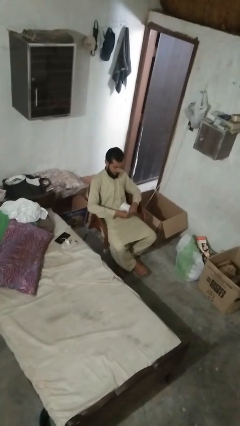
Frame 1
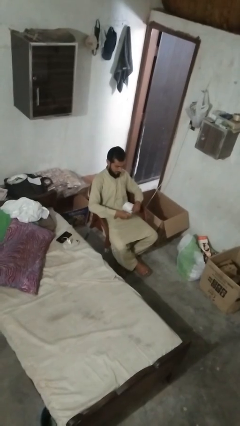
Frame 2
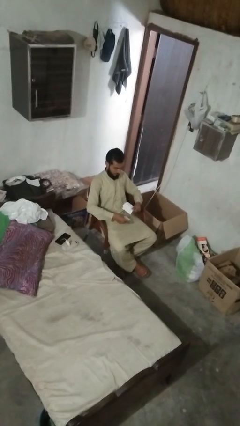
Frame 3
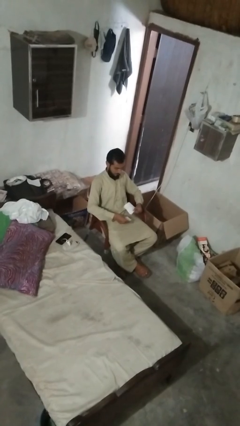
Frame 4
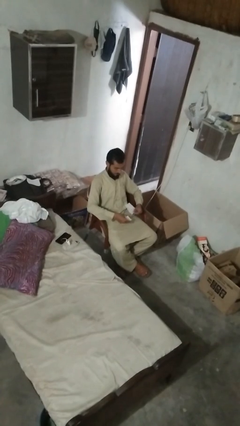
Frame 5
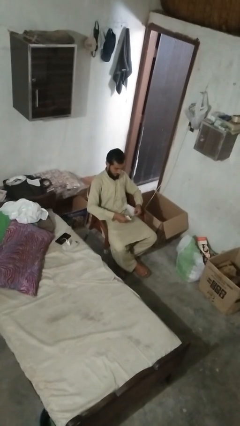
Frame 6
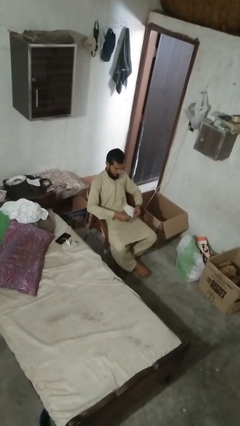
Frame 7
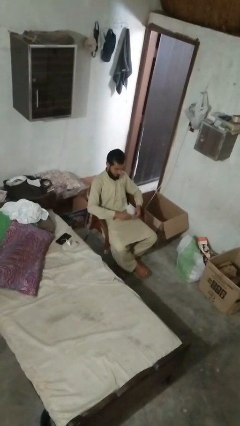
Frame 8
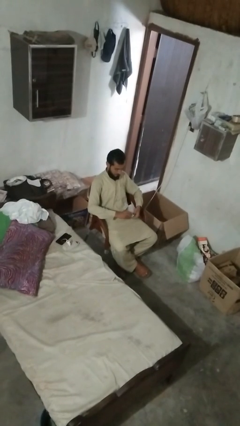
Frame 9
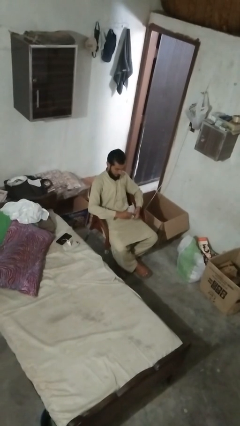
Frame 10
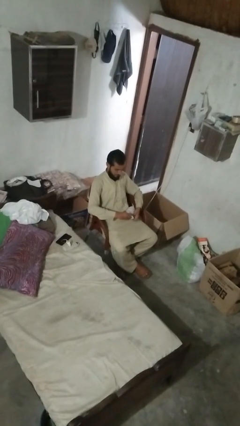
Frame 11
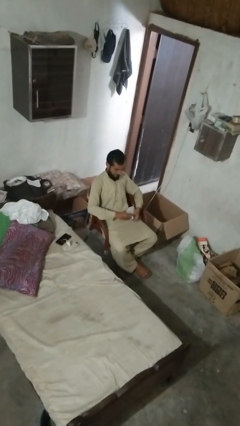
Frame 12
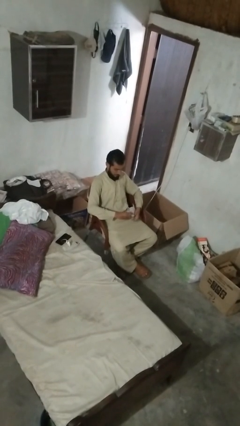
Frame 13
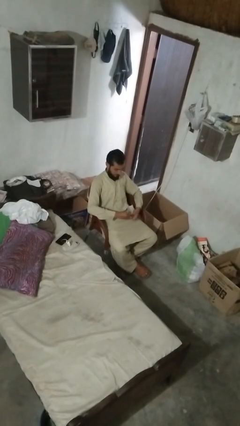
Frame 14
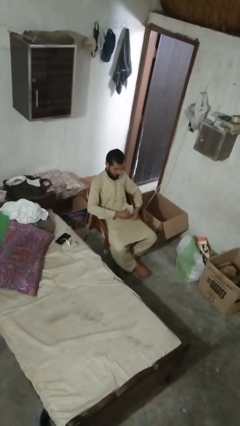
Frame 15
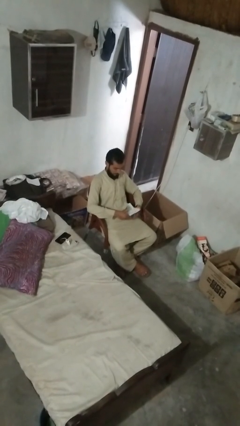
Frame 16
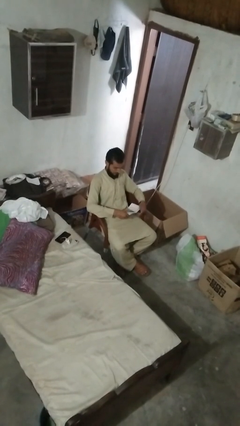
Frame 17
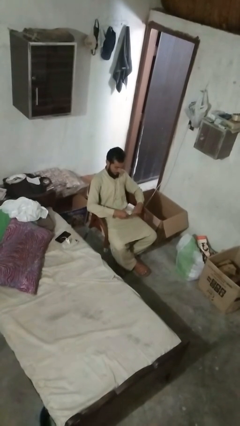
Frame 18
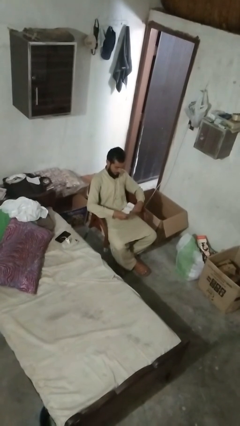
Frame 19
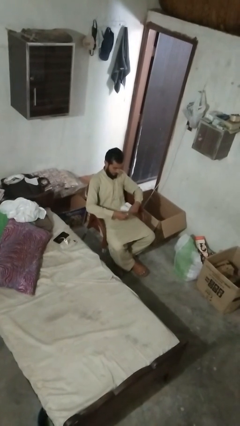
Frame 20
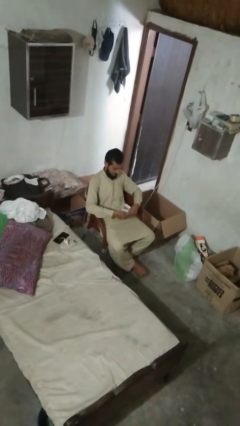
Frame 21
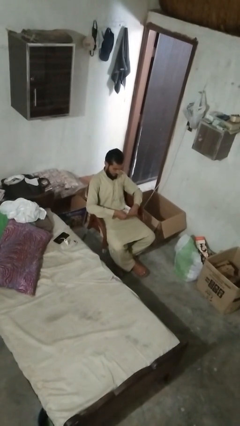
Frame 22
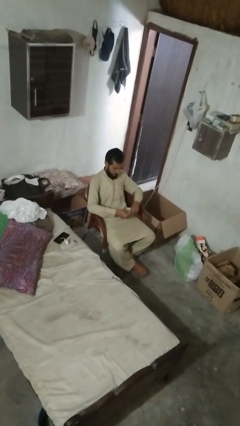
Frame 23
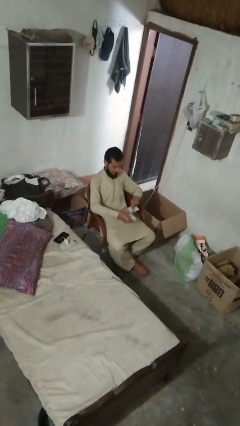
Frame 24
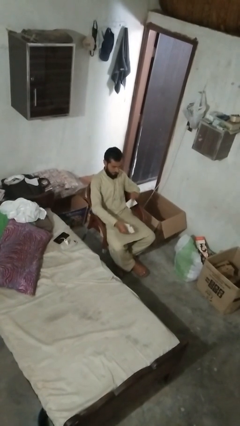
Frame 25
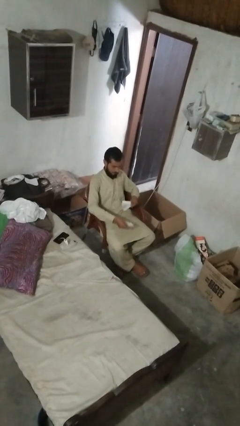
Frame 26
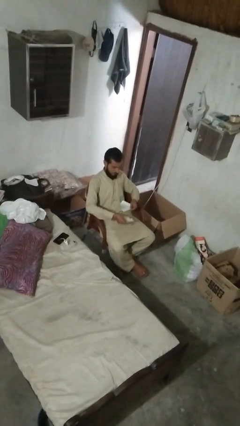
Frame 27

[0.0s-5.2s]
person tears paper

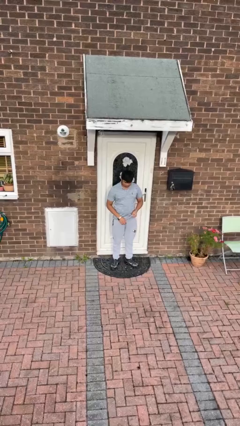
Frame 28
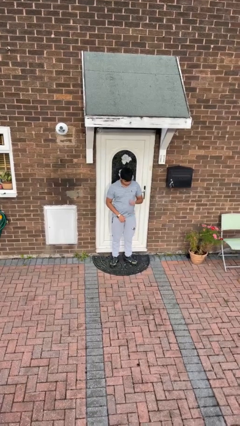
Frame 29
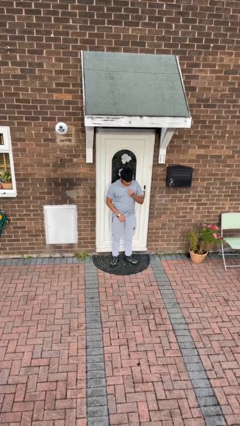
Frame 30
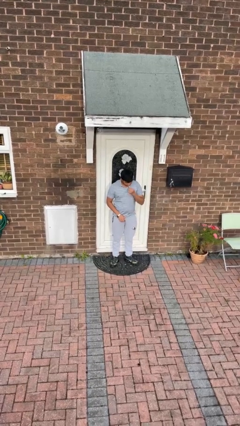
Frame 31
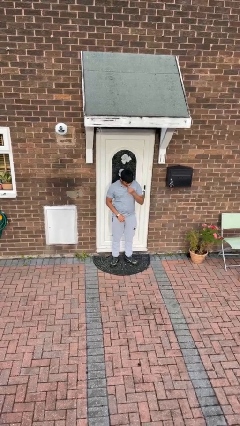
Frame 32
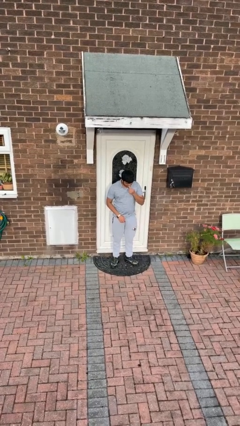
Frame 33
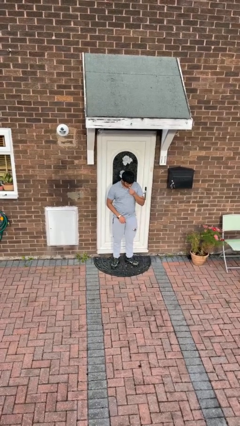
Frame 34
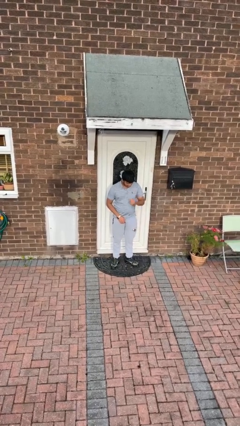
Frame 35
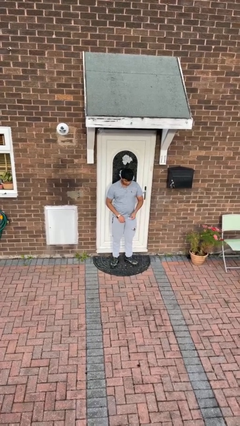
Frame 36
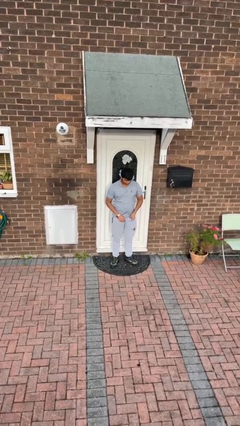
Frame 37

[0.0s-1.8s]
person flosses

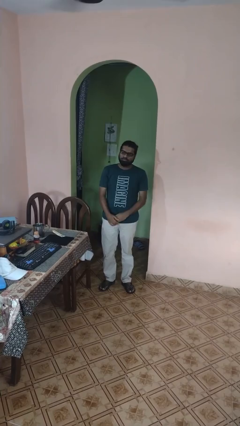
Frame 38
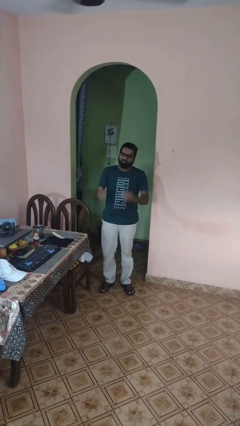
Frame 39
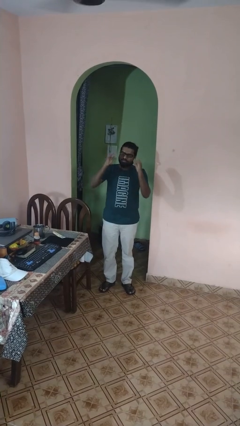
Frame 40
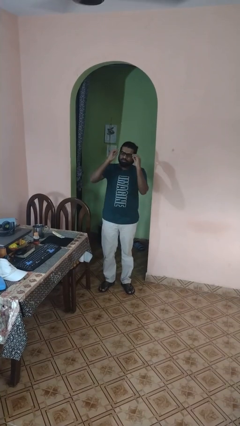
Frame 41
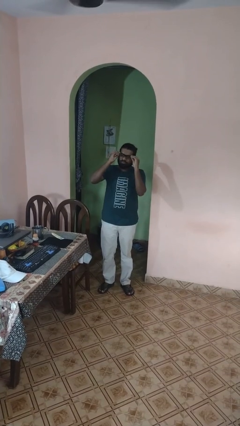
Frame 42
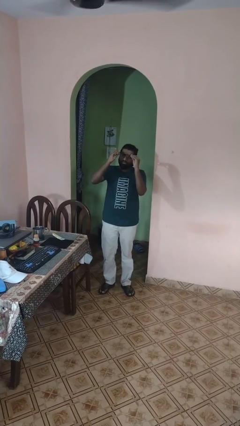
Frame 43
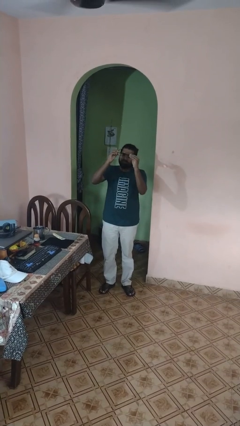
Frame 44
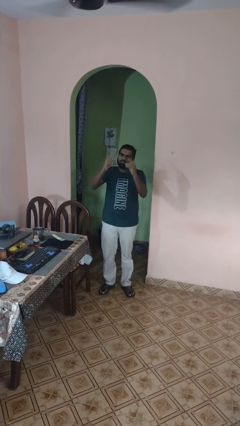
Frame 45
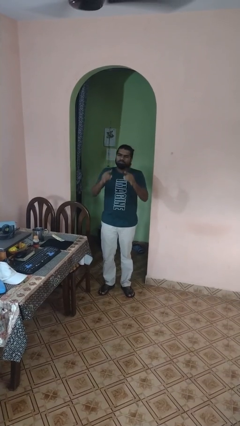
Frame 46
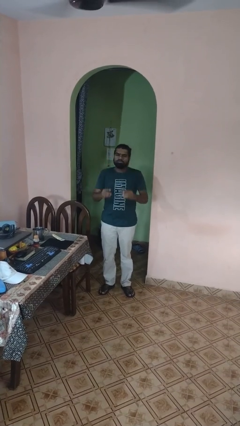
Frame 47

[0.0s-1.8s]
person takes off glasses

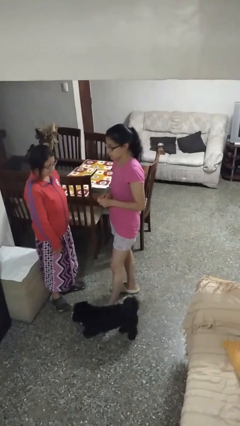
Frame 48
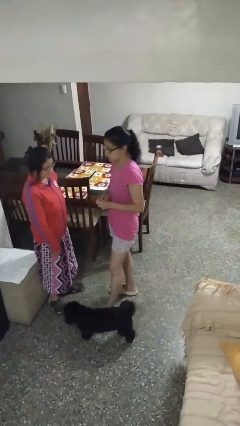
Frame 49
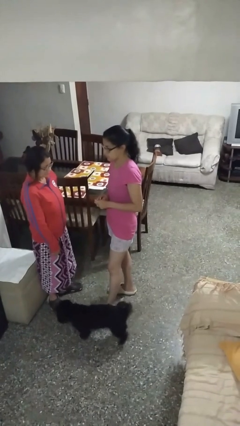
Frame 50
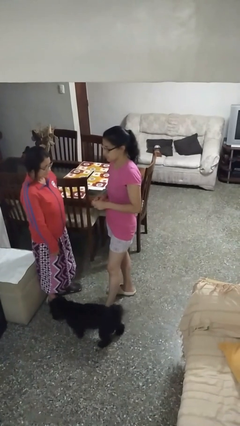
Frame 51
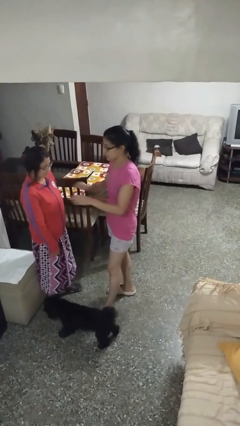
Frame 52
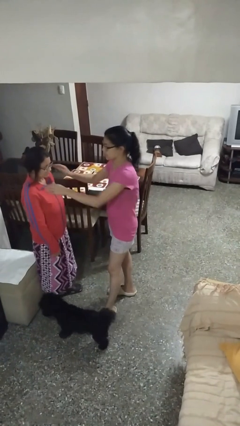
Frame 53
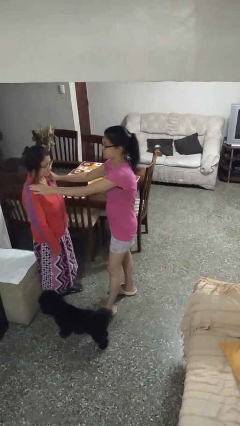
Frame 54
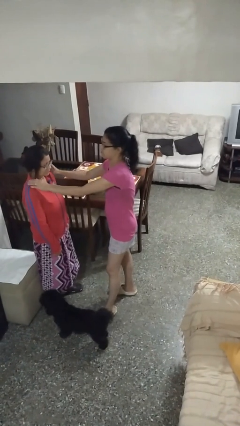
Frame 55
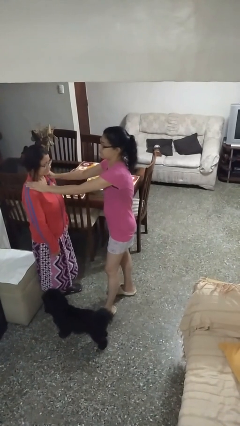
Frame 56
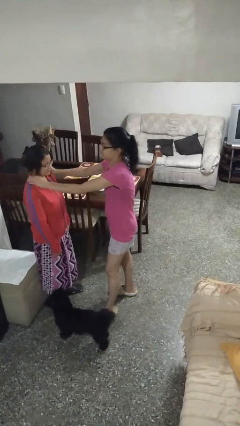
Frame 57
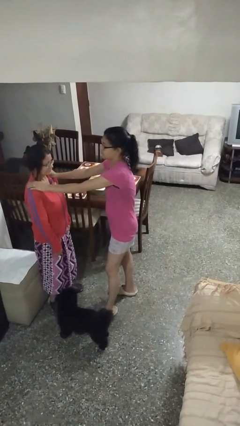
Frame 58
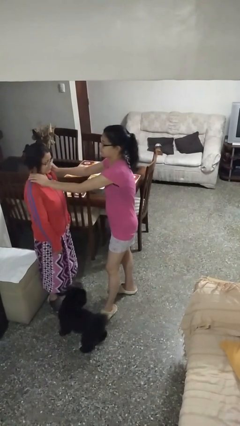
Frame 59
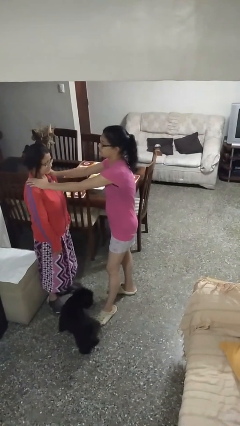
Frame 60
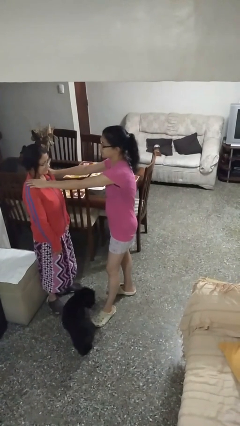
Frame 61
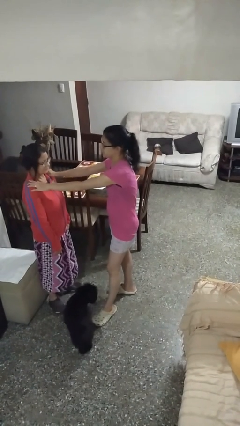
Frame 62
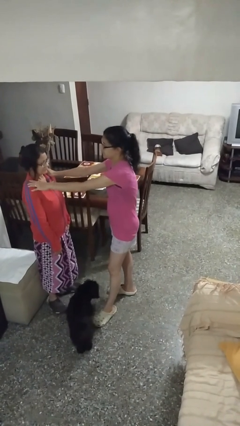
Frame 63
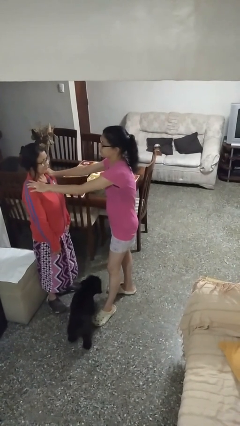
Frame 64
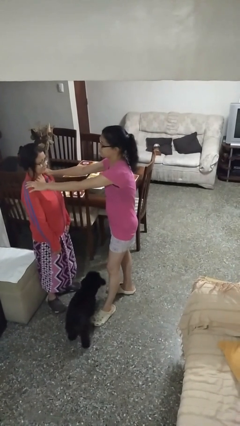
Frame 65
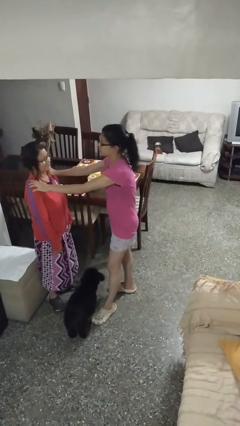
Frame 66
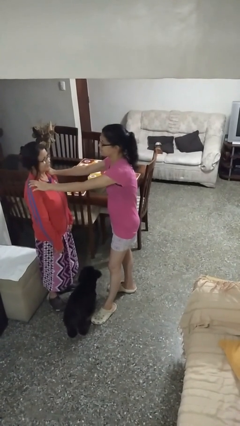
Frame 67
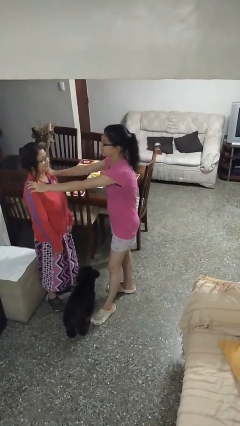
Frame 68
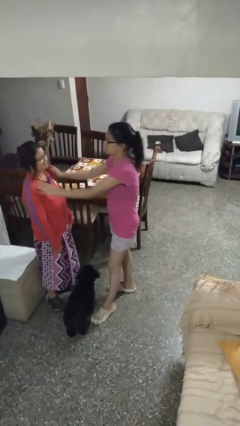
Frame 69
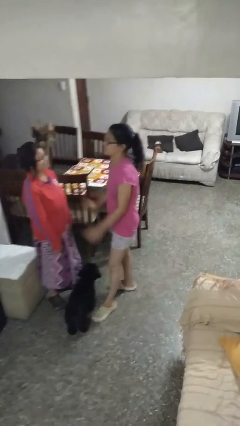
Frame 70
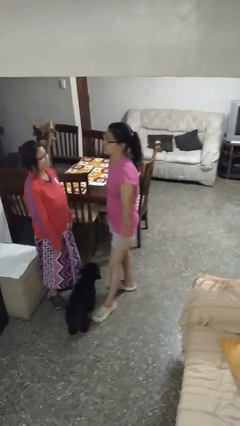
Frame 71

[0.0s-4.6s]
person pounds shoulders of person

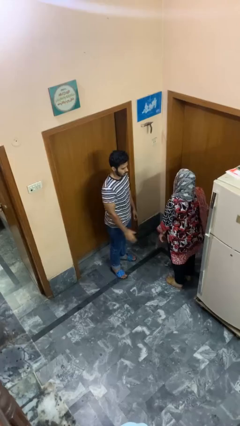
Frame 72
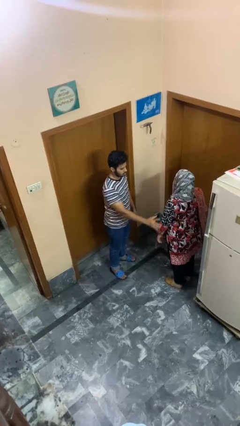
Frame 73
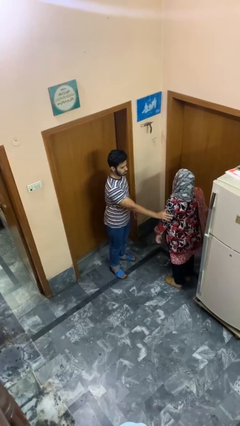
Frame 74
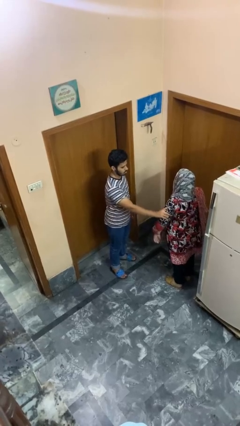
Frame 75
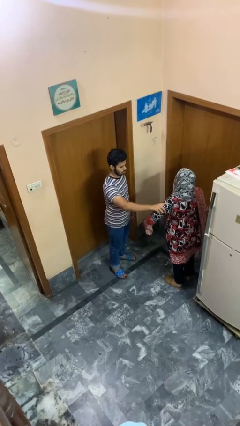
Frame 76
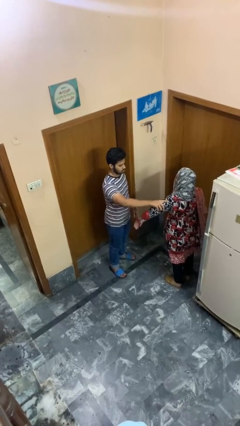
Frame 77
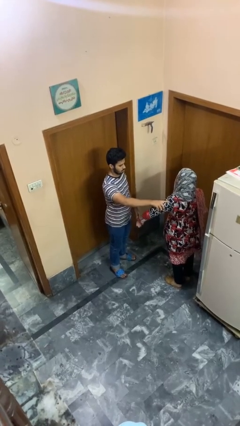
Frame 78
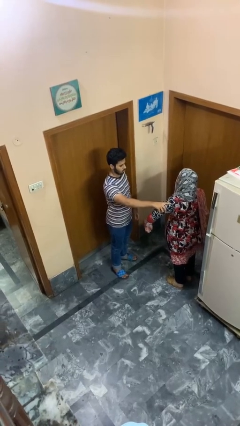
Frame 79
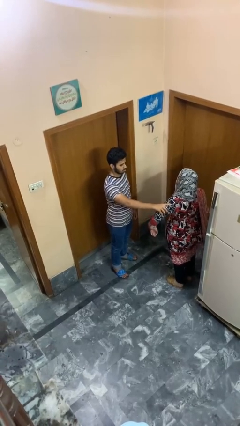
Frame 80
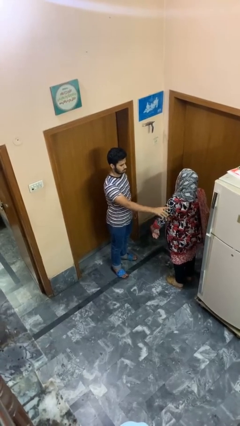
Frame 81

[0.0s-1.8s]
person grabs person by bicep

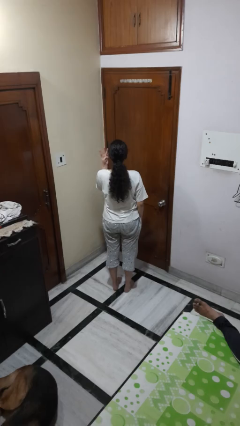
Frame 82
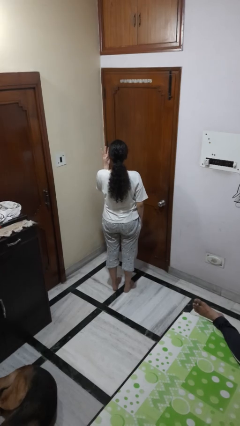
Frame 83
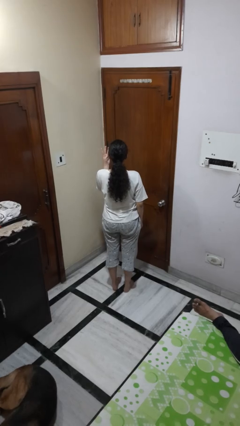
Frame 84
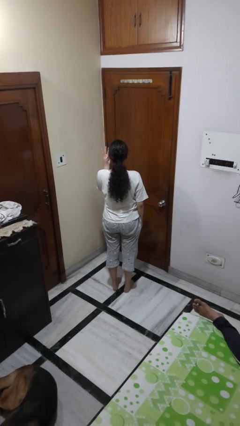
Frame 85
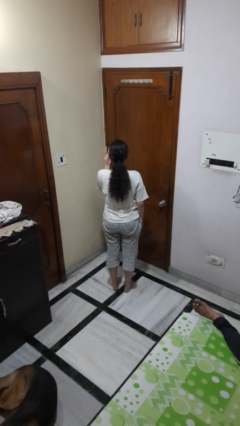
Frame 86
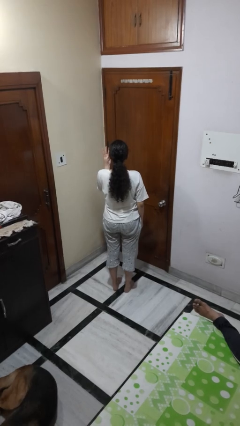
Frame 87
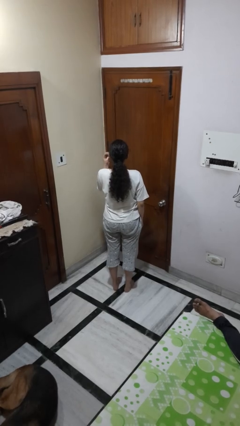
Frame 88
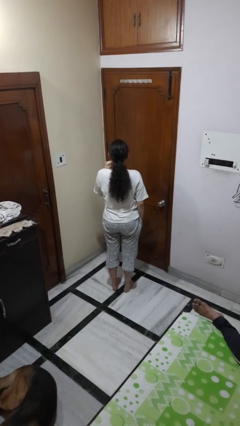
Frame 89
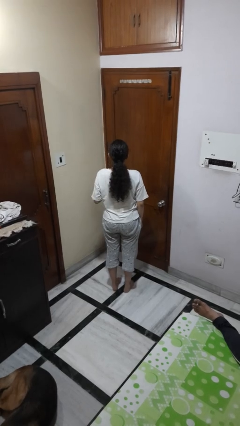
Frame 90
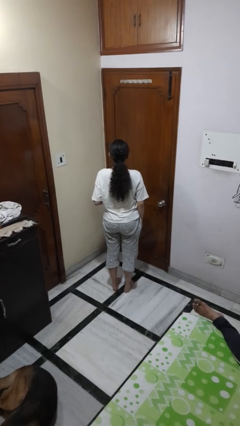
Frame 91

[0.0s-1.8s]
person gestures number three

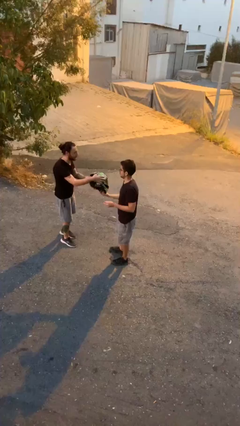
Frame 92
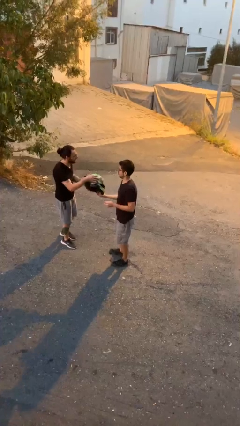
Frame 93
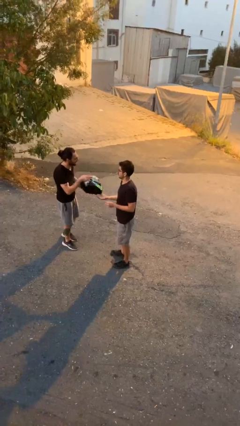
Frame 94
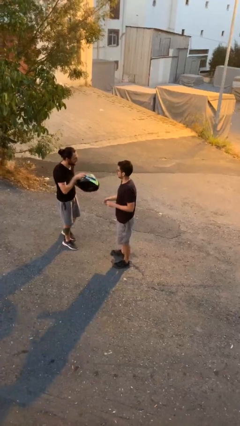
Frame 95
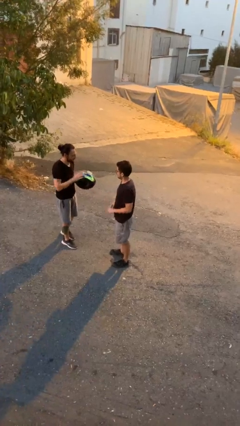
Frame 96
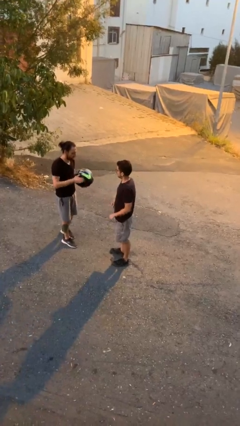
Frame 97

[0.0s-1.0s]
person transfers object to person
